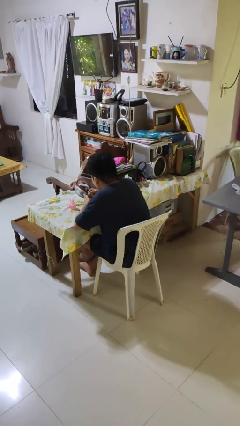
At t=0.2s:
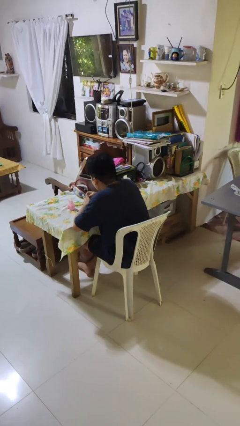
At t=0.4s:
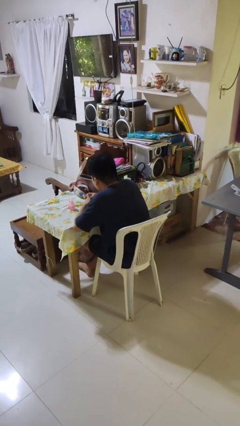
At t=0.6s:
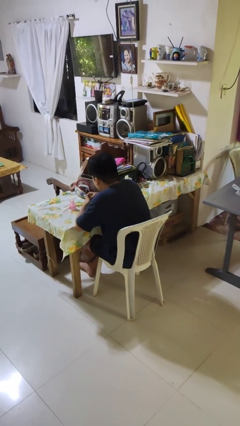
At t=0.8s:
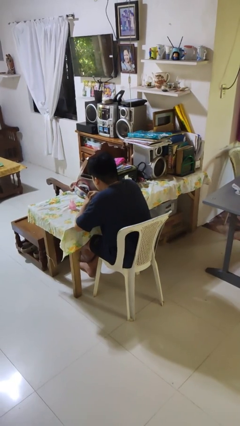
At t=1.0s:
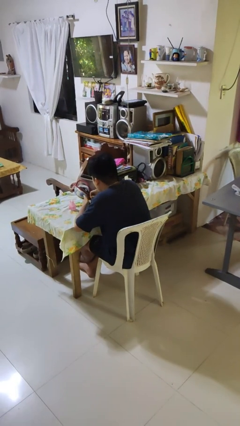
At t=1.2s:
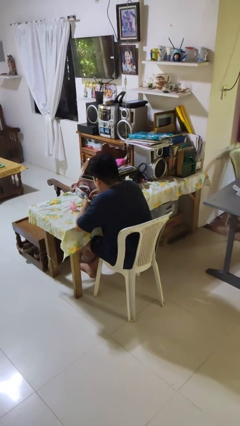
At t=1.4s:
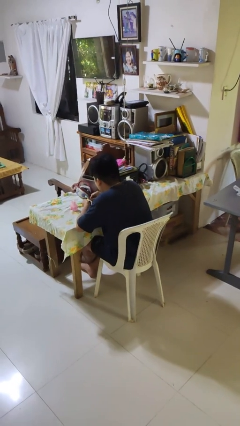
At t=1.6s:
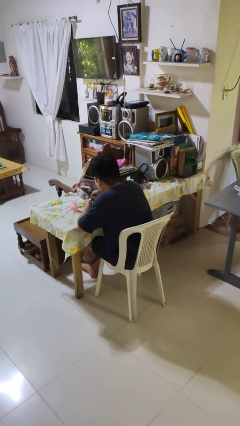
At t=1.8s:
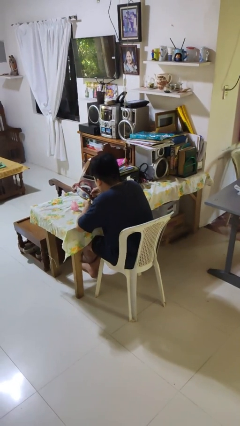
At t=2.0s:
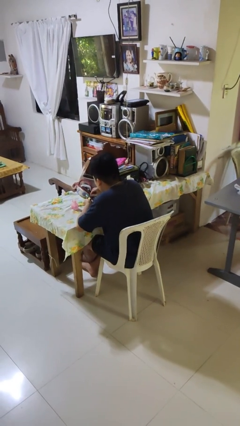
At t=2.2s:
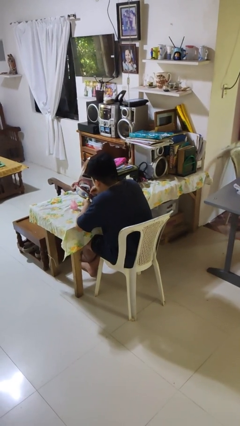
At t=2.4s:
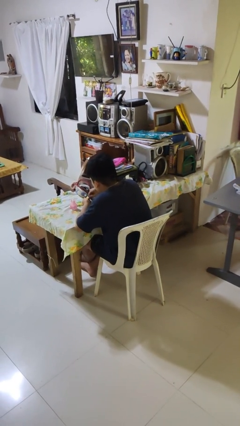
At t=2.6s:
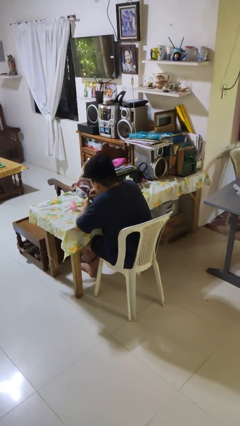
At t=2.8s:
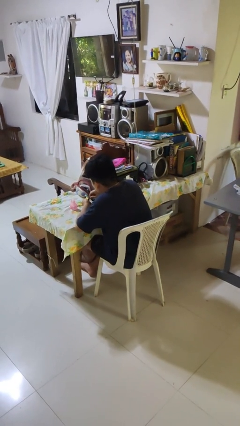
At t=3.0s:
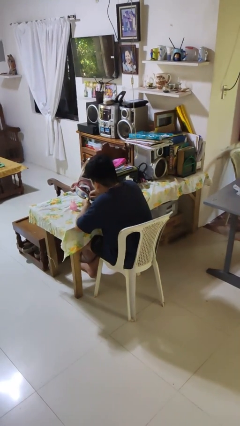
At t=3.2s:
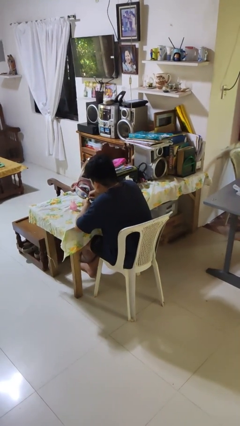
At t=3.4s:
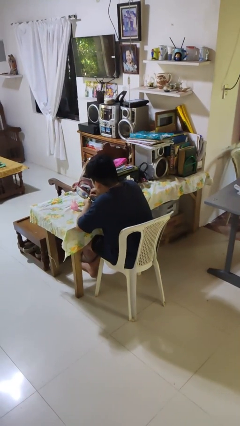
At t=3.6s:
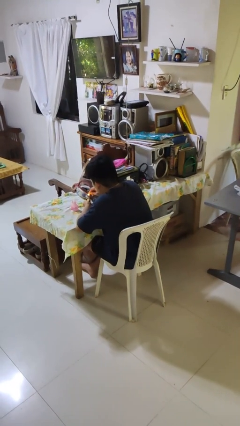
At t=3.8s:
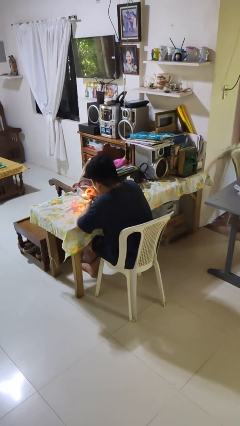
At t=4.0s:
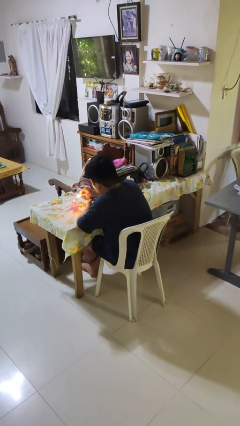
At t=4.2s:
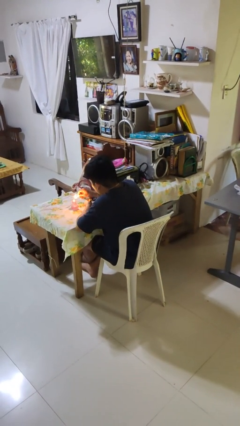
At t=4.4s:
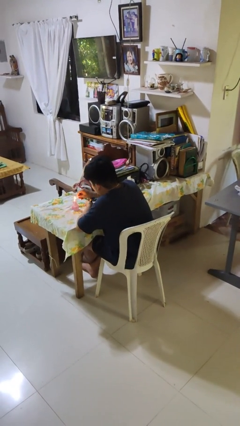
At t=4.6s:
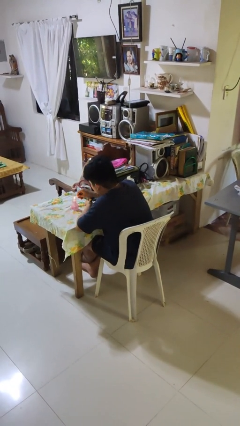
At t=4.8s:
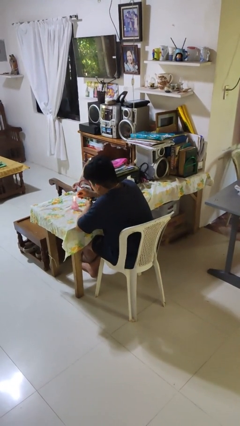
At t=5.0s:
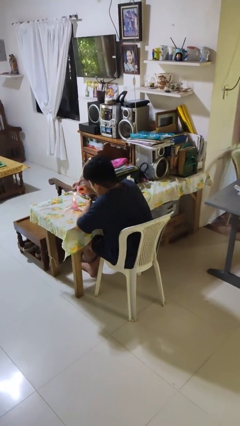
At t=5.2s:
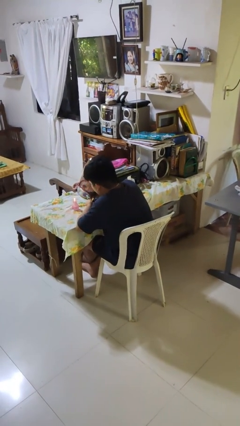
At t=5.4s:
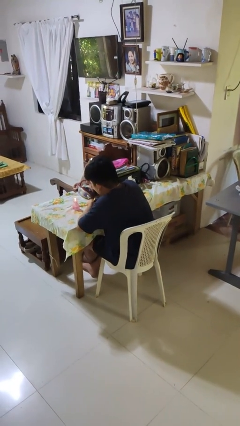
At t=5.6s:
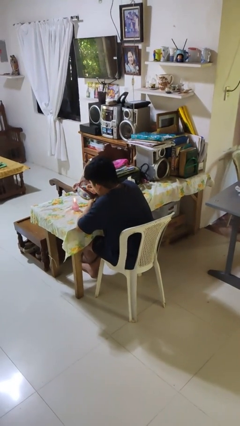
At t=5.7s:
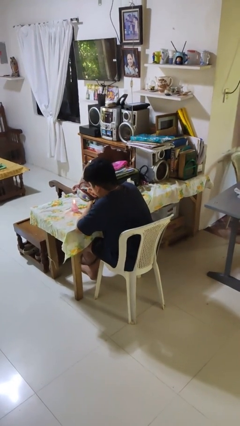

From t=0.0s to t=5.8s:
person lights candle

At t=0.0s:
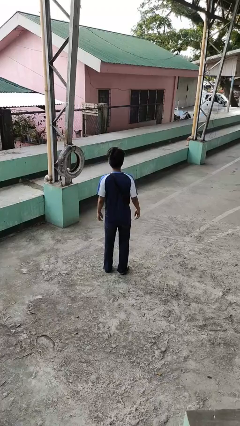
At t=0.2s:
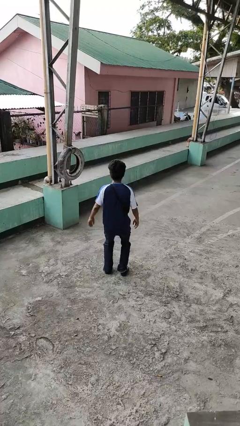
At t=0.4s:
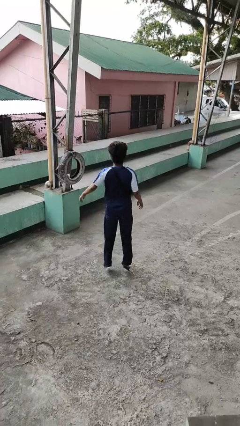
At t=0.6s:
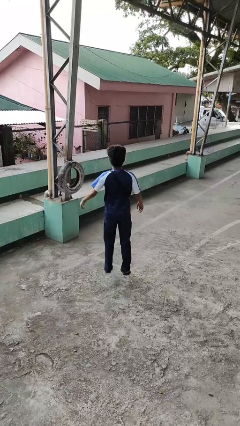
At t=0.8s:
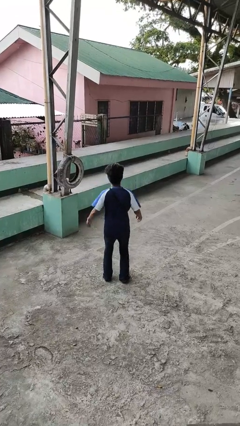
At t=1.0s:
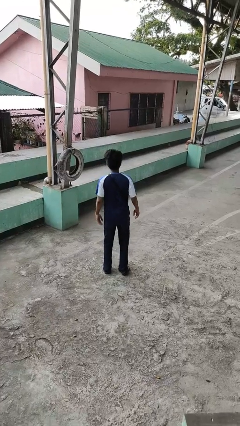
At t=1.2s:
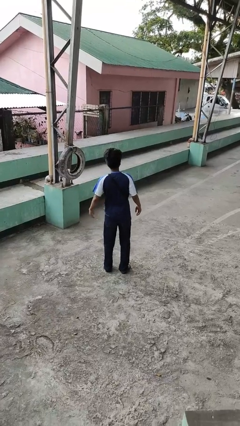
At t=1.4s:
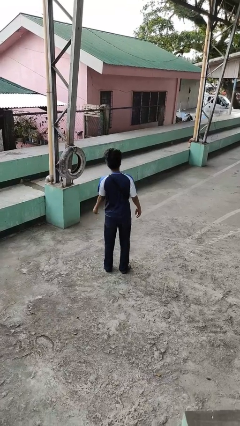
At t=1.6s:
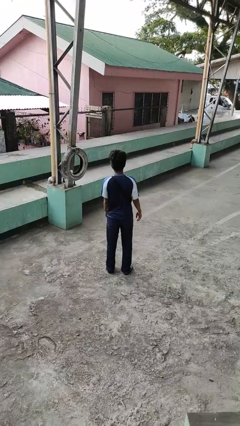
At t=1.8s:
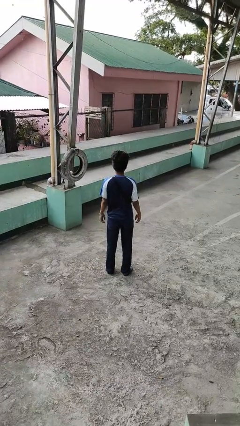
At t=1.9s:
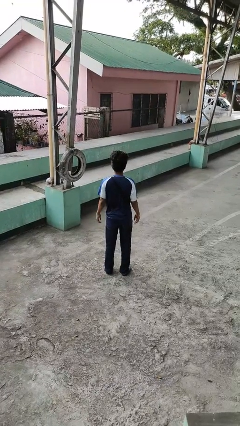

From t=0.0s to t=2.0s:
person jumps

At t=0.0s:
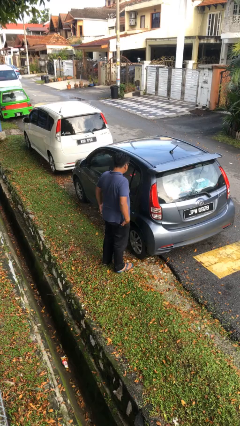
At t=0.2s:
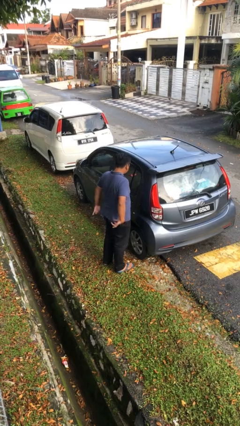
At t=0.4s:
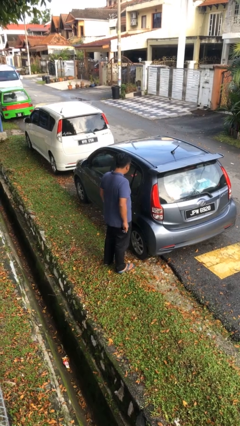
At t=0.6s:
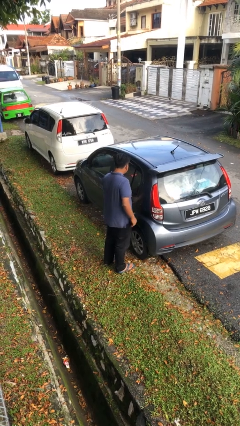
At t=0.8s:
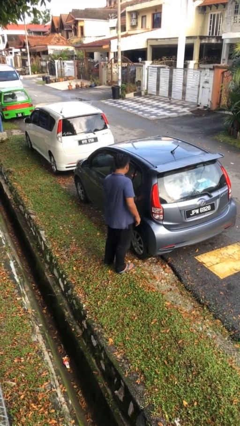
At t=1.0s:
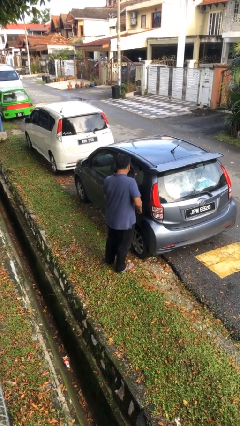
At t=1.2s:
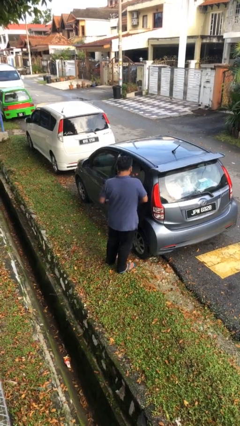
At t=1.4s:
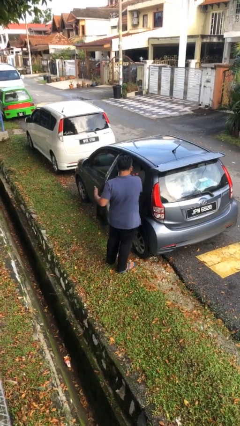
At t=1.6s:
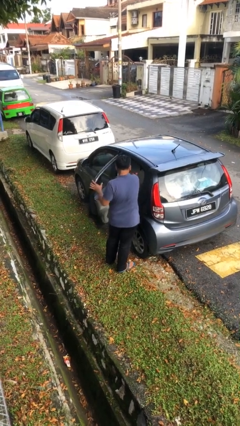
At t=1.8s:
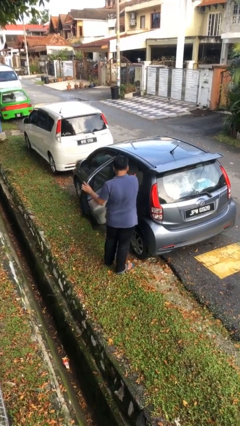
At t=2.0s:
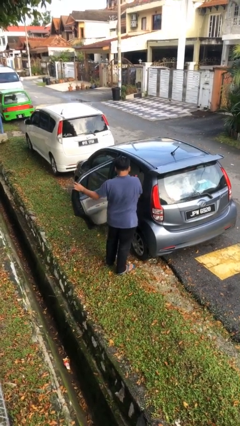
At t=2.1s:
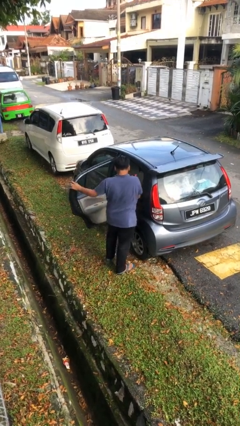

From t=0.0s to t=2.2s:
person opens car door

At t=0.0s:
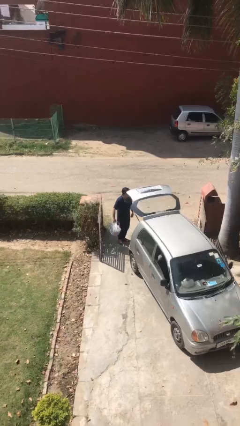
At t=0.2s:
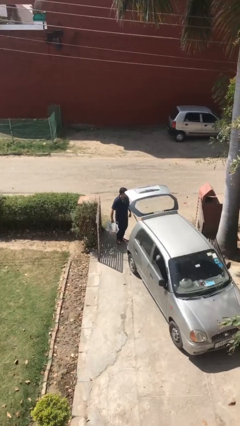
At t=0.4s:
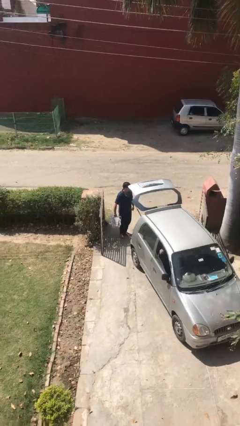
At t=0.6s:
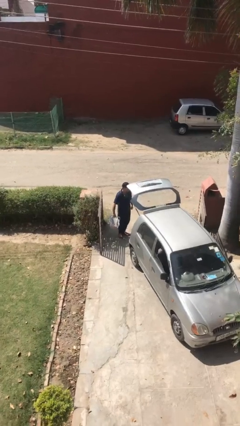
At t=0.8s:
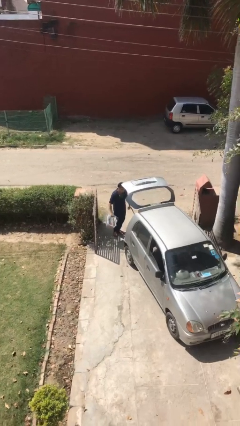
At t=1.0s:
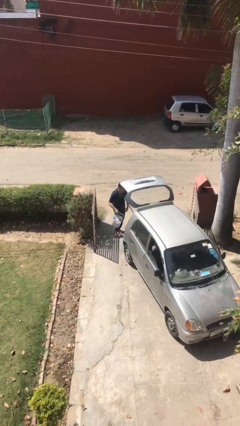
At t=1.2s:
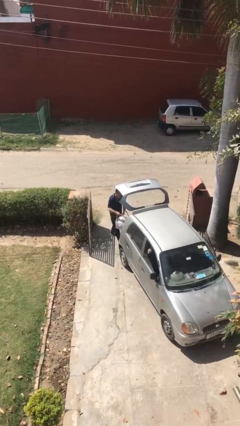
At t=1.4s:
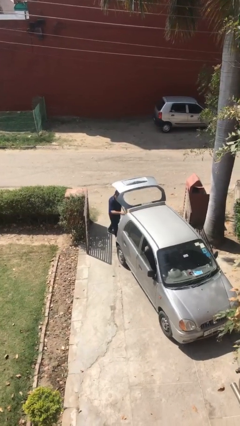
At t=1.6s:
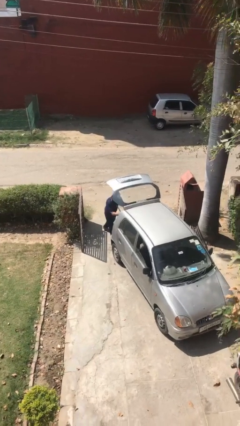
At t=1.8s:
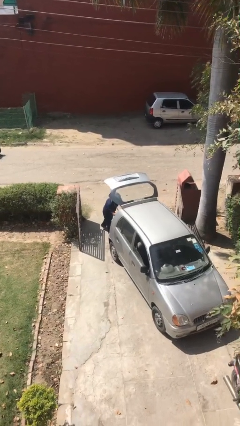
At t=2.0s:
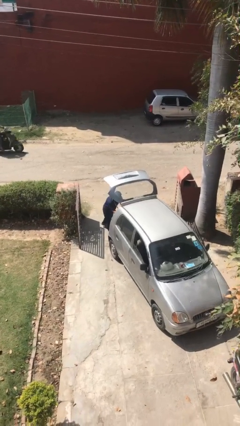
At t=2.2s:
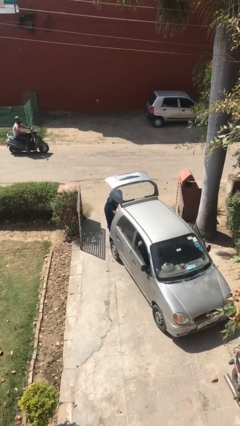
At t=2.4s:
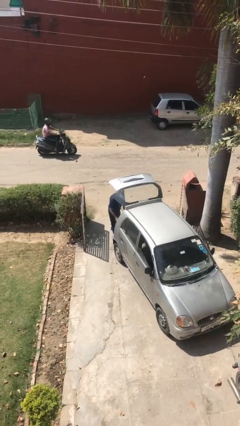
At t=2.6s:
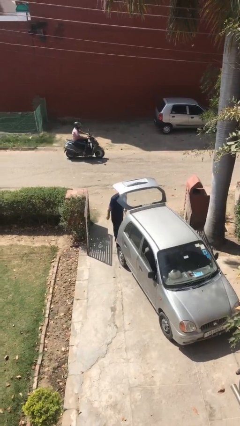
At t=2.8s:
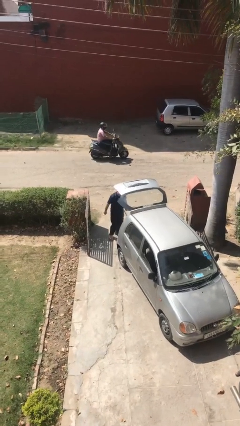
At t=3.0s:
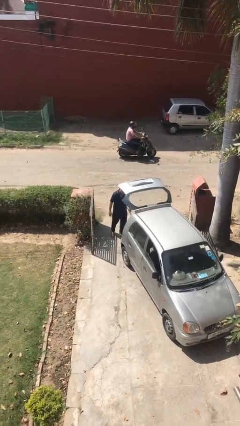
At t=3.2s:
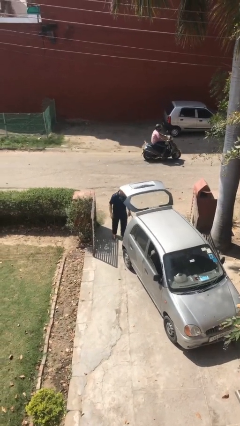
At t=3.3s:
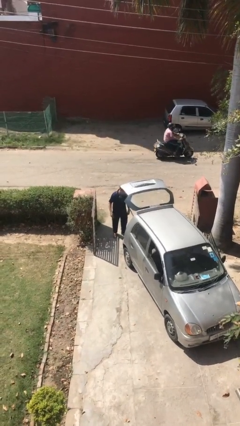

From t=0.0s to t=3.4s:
person loads car

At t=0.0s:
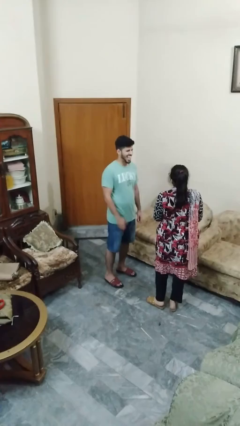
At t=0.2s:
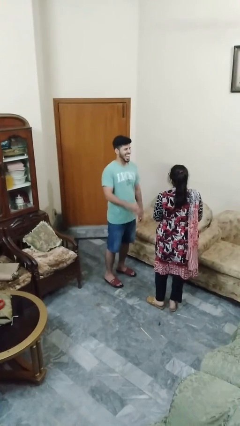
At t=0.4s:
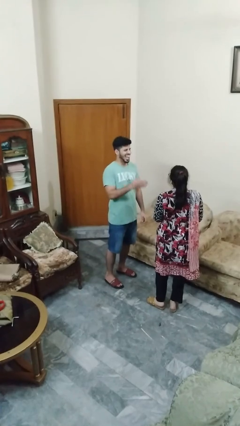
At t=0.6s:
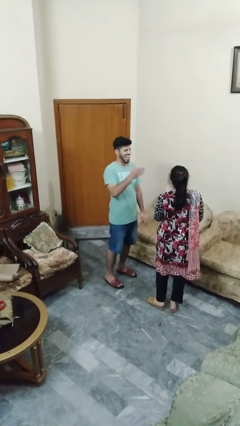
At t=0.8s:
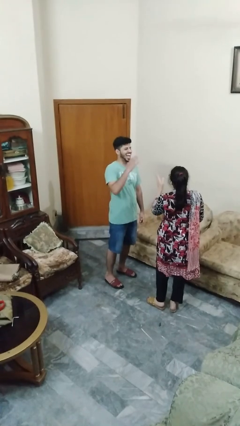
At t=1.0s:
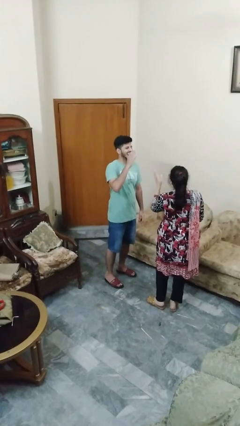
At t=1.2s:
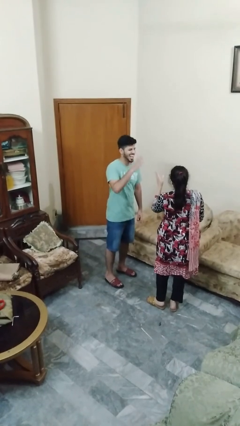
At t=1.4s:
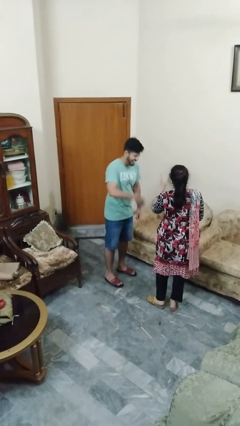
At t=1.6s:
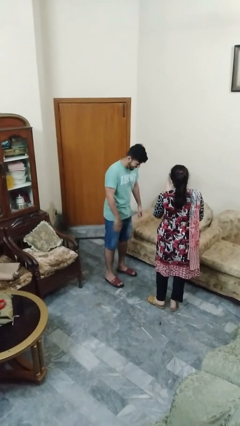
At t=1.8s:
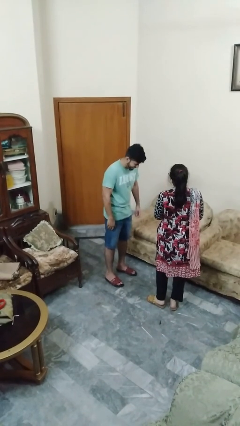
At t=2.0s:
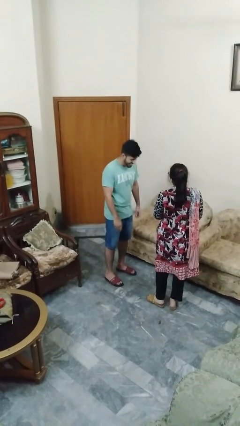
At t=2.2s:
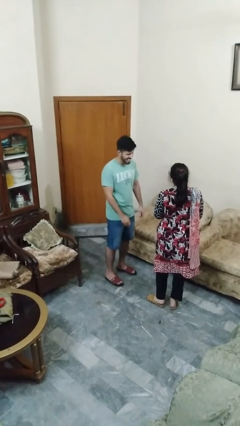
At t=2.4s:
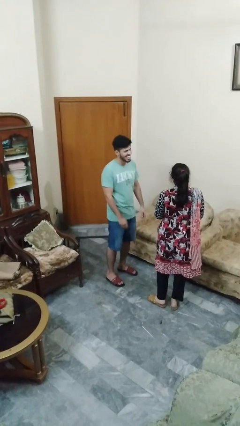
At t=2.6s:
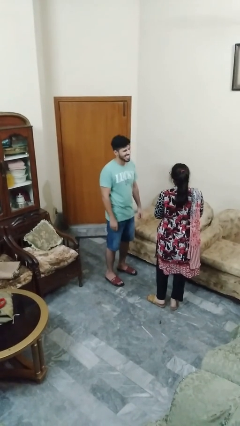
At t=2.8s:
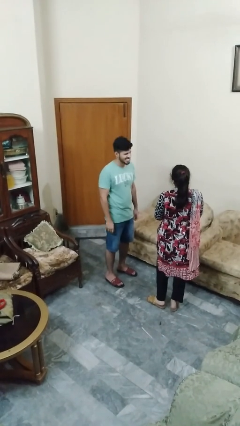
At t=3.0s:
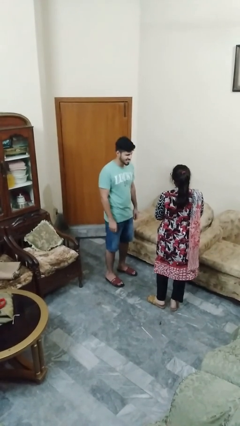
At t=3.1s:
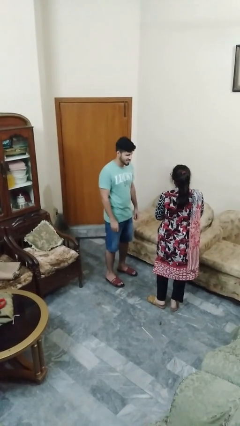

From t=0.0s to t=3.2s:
person laughs with person

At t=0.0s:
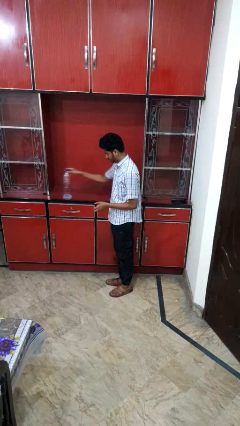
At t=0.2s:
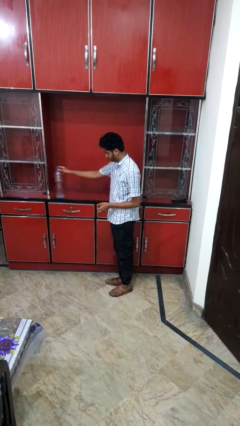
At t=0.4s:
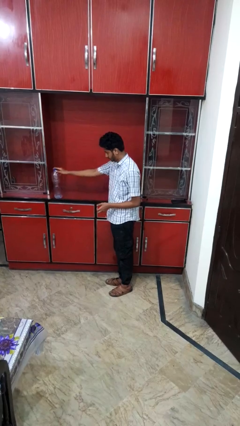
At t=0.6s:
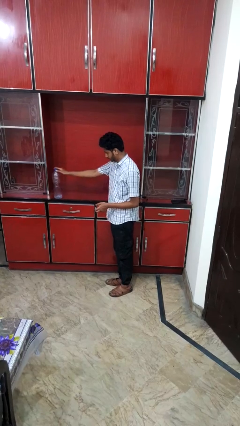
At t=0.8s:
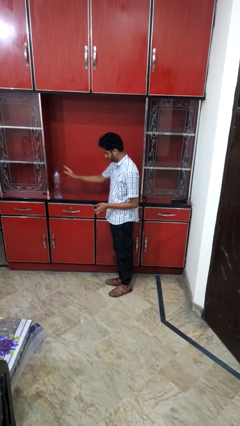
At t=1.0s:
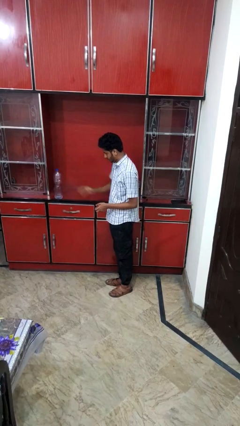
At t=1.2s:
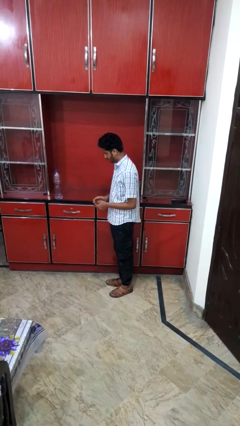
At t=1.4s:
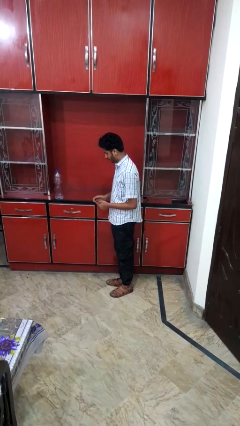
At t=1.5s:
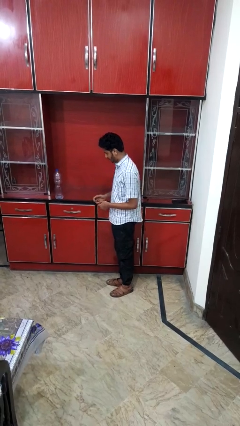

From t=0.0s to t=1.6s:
person puts down object on countertop
